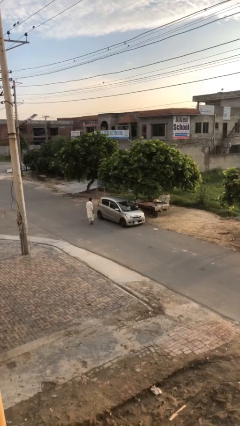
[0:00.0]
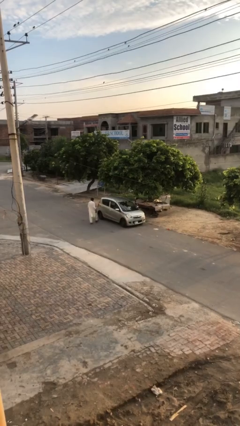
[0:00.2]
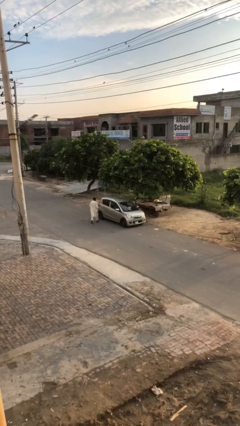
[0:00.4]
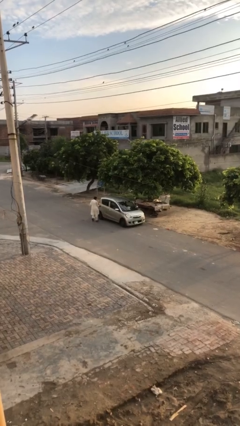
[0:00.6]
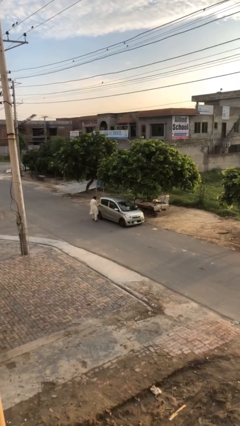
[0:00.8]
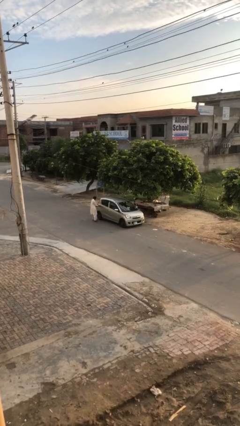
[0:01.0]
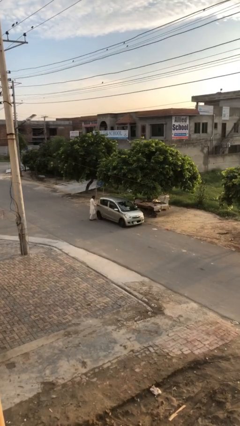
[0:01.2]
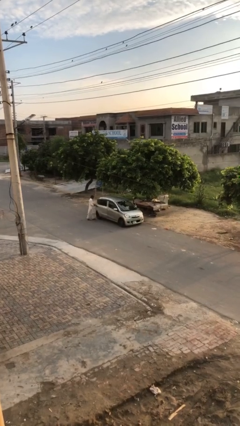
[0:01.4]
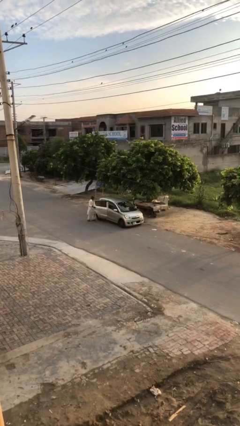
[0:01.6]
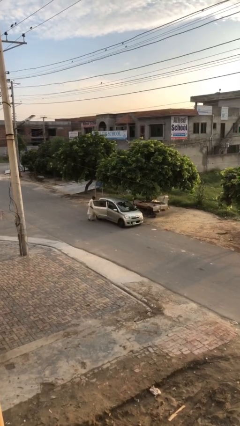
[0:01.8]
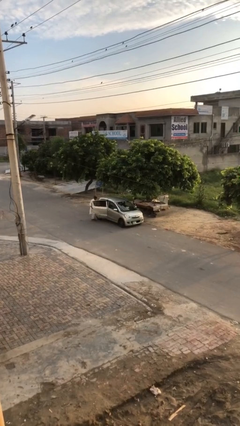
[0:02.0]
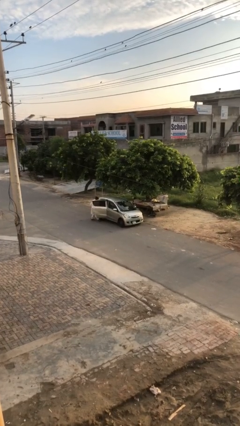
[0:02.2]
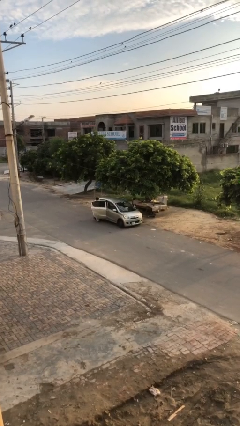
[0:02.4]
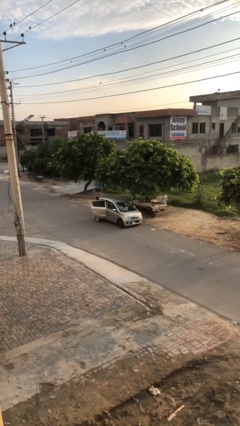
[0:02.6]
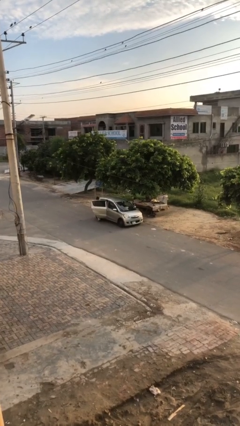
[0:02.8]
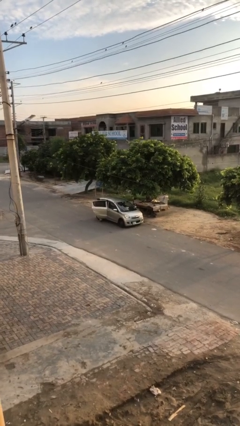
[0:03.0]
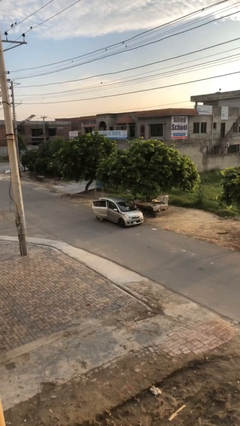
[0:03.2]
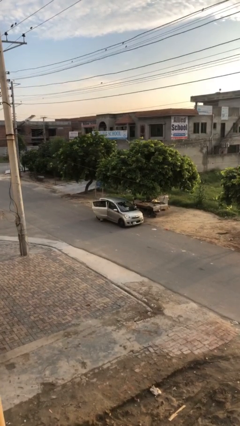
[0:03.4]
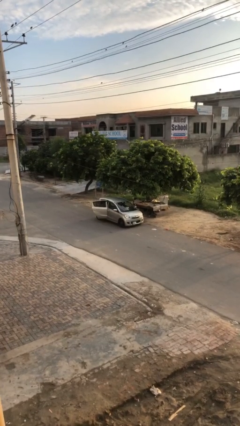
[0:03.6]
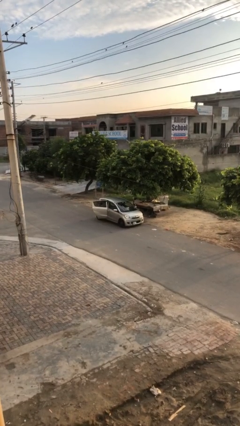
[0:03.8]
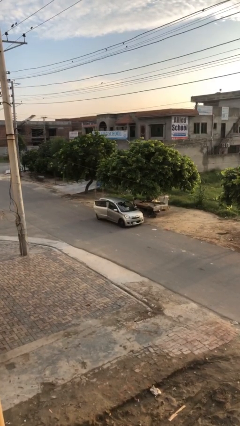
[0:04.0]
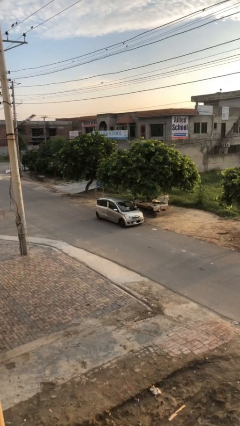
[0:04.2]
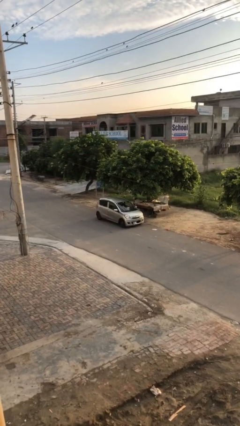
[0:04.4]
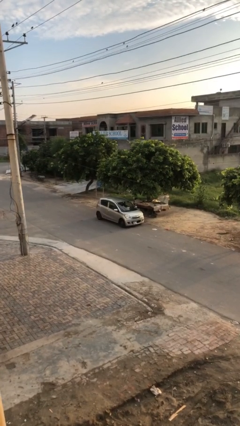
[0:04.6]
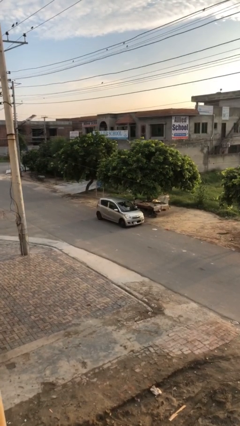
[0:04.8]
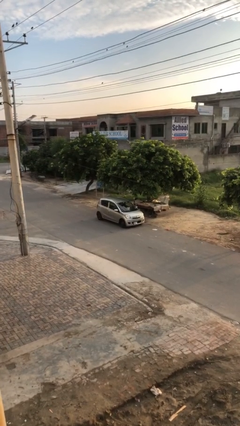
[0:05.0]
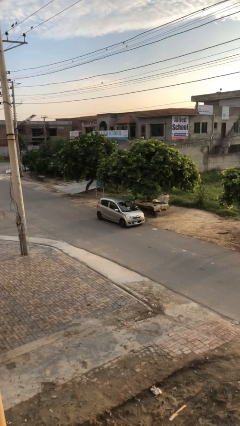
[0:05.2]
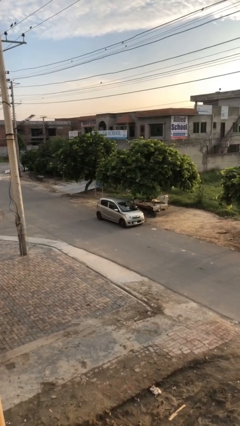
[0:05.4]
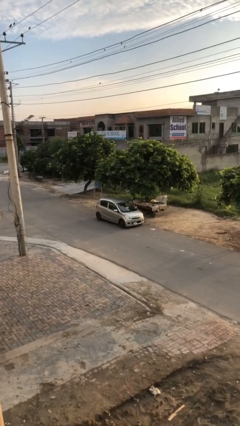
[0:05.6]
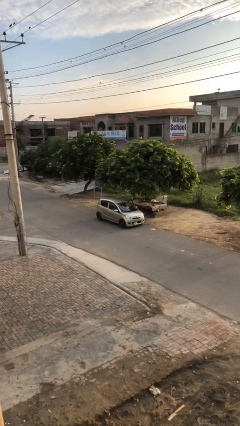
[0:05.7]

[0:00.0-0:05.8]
car picks up person

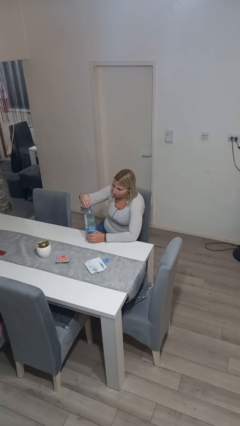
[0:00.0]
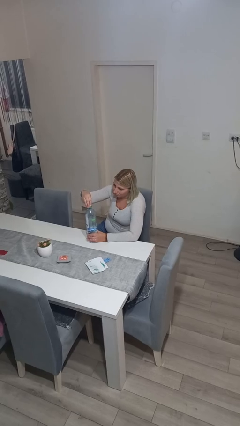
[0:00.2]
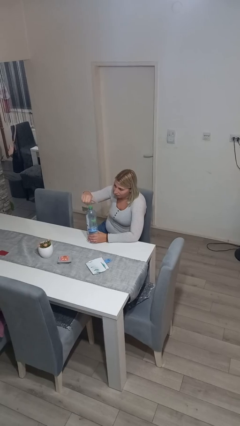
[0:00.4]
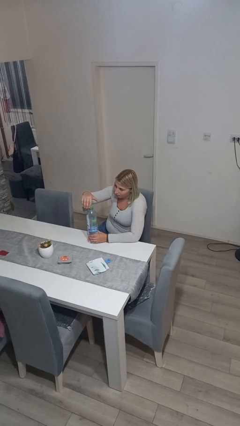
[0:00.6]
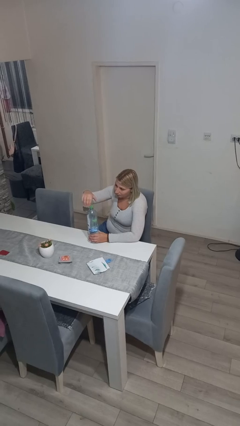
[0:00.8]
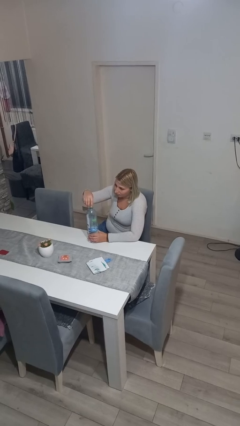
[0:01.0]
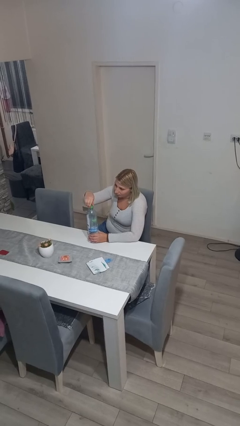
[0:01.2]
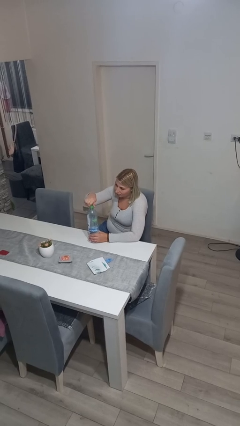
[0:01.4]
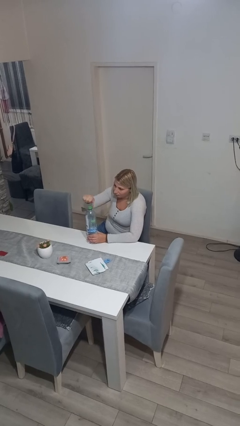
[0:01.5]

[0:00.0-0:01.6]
person screws lid to bottle

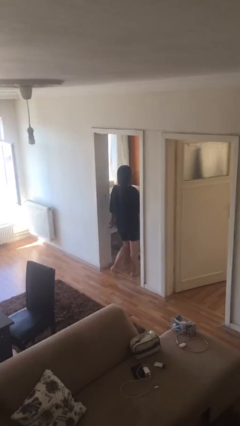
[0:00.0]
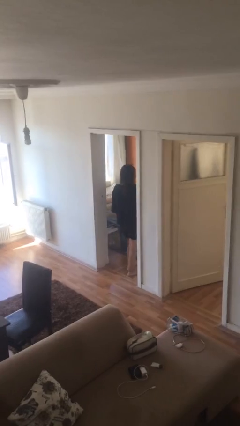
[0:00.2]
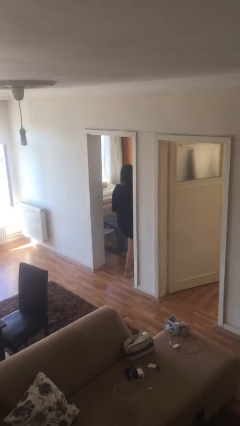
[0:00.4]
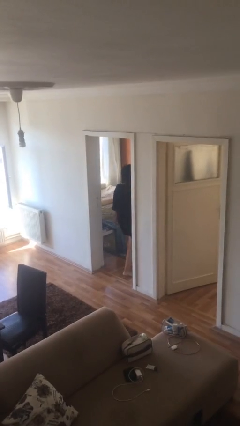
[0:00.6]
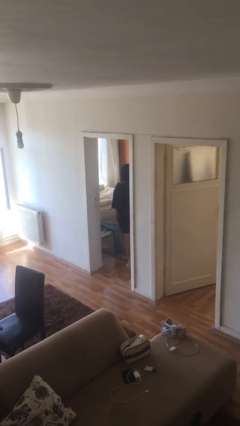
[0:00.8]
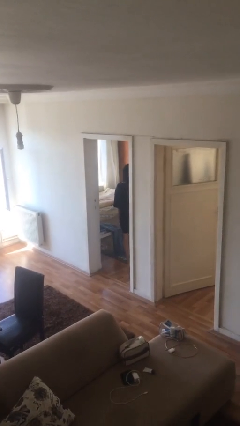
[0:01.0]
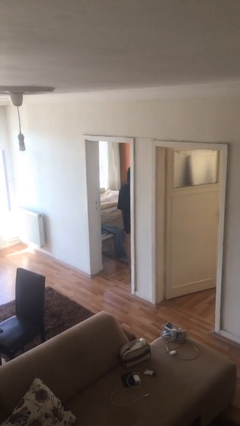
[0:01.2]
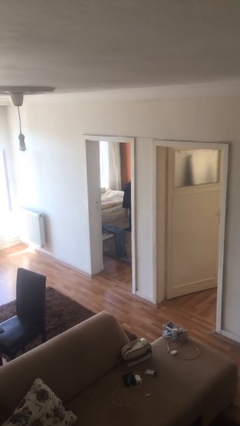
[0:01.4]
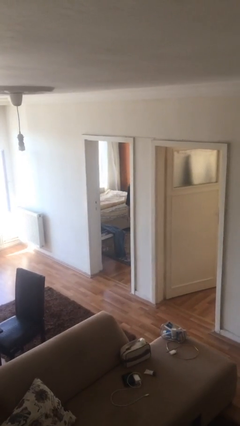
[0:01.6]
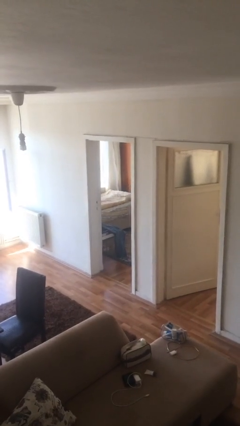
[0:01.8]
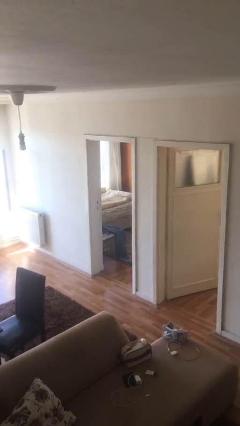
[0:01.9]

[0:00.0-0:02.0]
person exits scene through structure

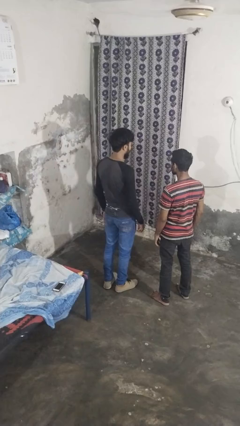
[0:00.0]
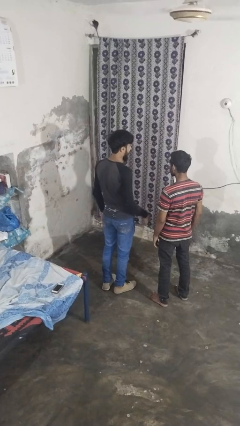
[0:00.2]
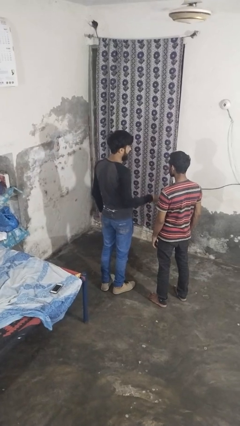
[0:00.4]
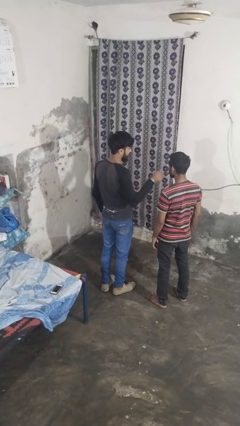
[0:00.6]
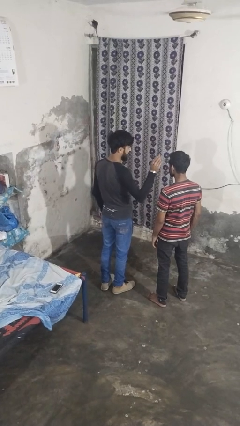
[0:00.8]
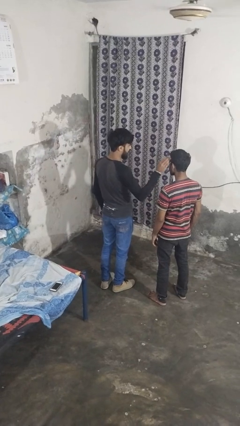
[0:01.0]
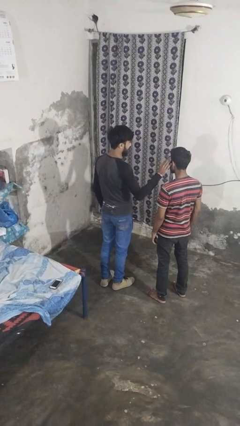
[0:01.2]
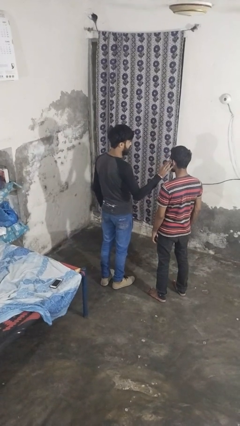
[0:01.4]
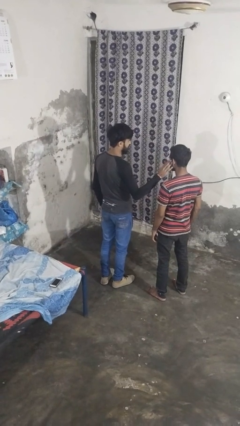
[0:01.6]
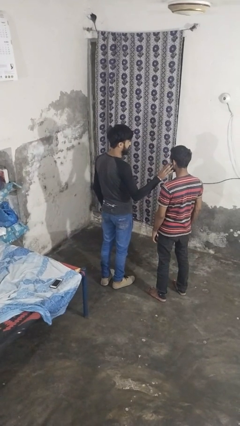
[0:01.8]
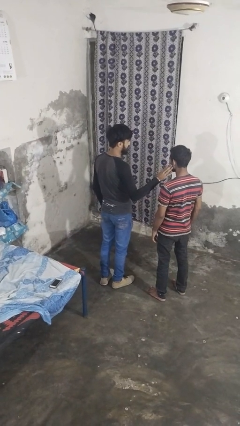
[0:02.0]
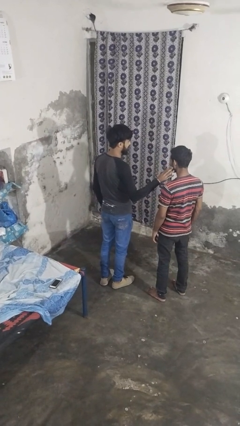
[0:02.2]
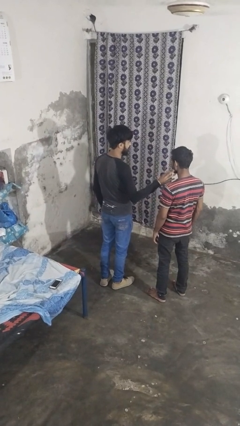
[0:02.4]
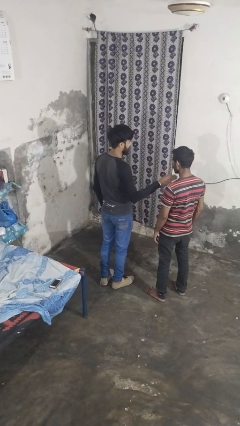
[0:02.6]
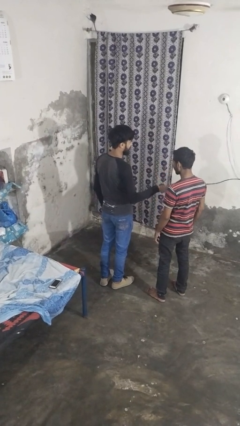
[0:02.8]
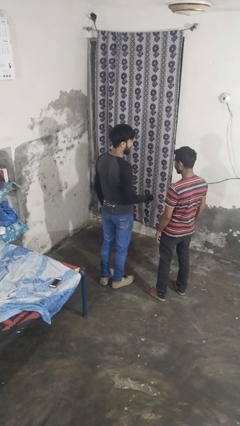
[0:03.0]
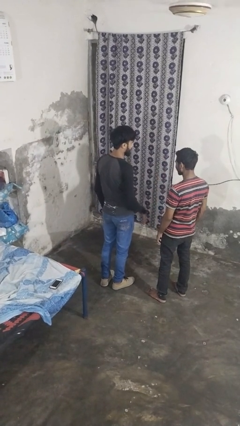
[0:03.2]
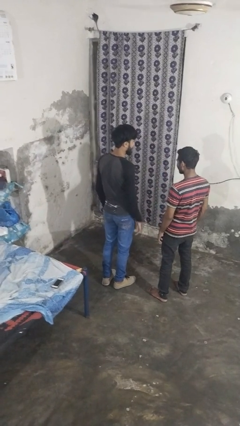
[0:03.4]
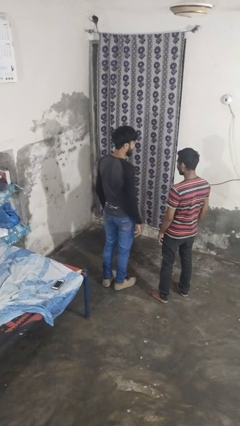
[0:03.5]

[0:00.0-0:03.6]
person touches face of person

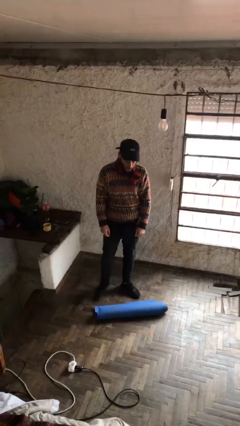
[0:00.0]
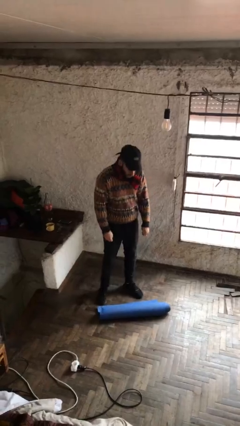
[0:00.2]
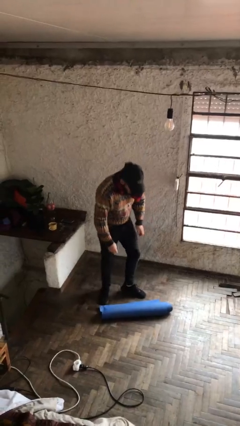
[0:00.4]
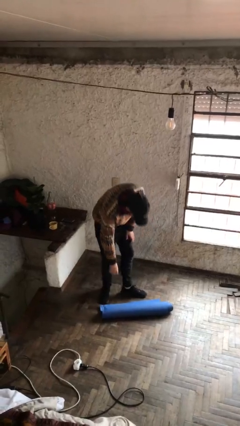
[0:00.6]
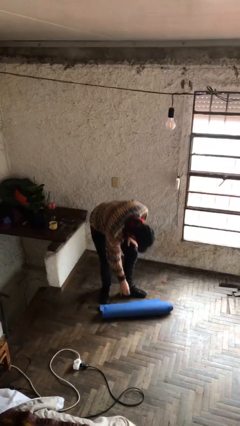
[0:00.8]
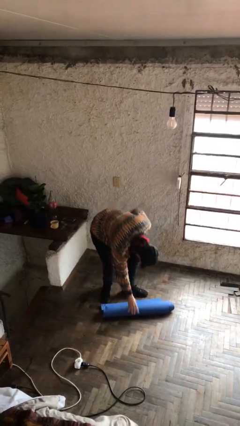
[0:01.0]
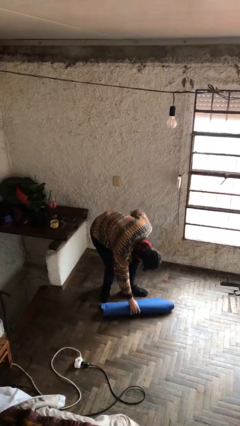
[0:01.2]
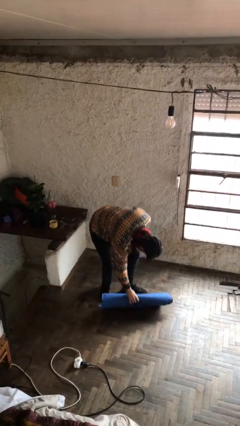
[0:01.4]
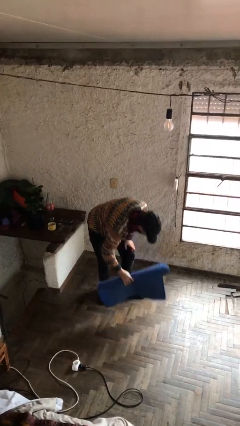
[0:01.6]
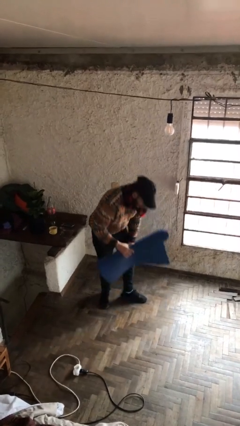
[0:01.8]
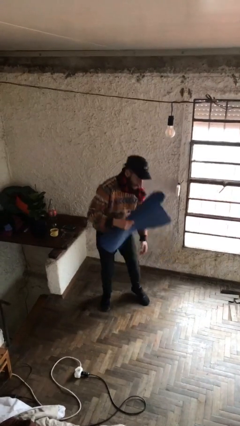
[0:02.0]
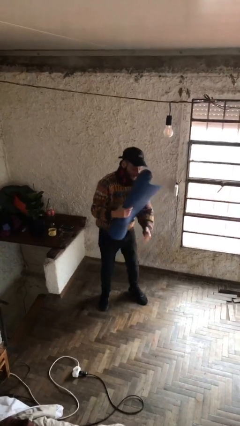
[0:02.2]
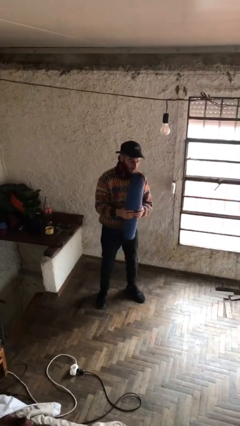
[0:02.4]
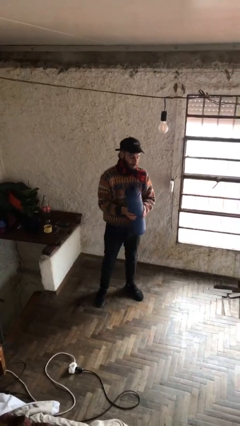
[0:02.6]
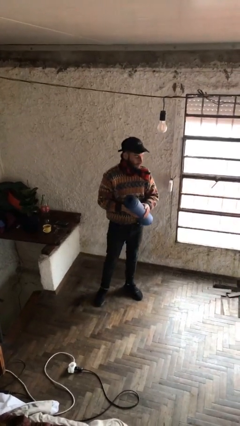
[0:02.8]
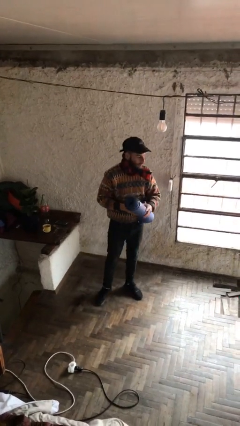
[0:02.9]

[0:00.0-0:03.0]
person picks up object from floor

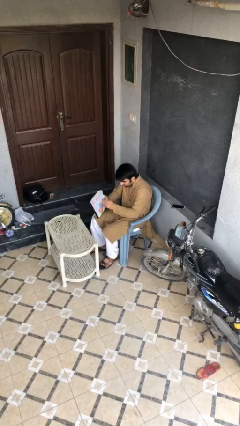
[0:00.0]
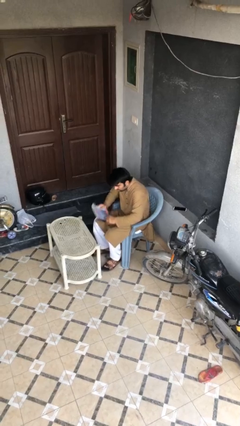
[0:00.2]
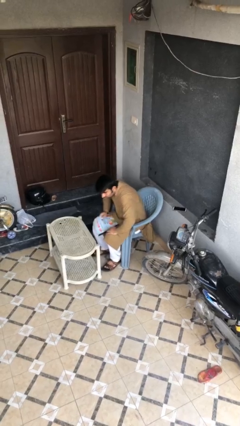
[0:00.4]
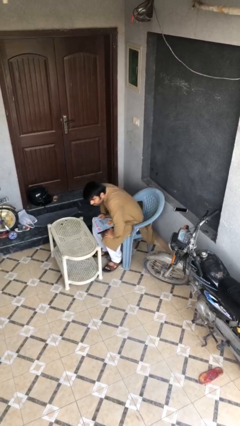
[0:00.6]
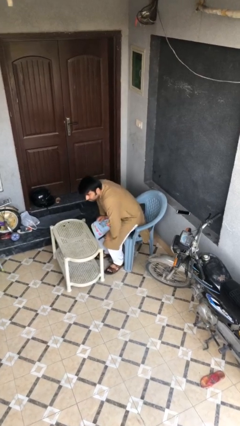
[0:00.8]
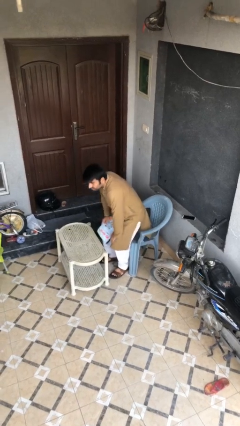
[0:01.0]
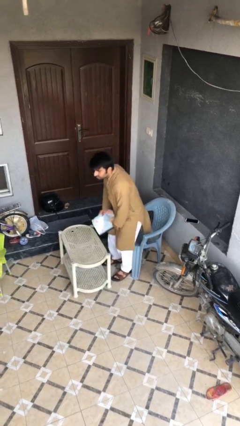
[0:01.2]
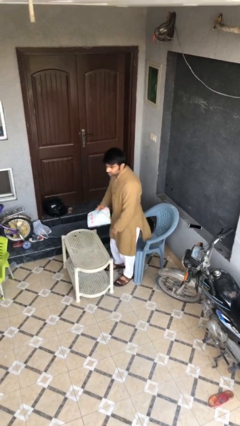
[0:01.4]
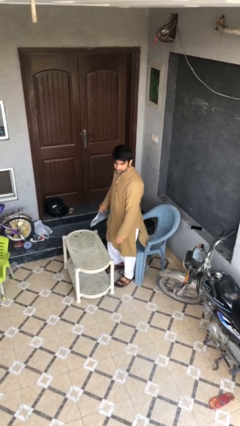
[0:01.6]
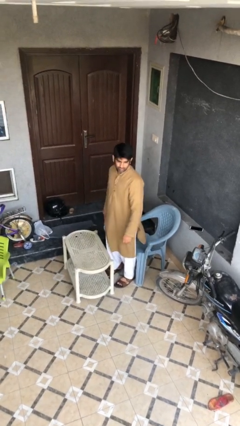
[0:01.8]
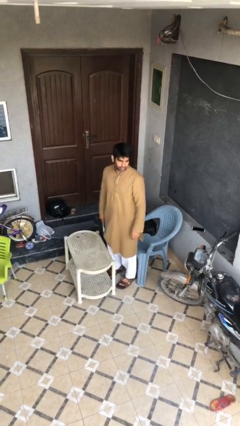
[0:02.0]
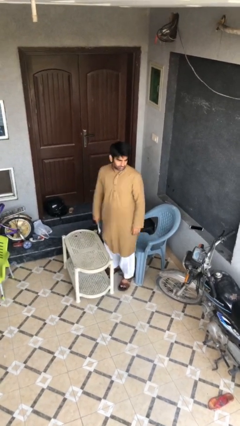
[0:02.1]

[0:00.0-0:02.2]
person stands up
